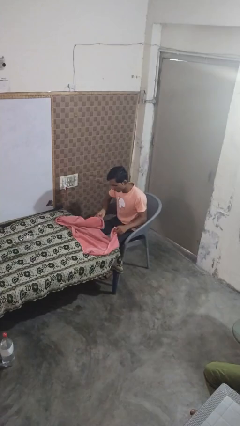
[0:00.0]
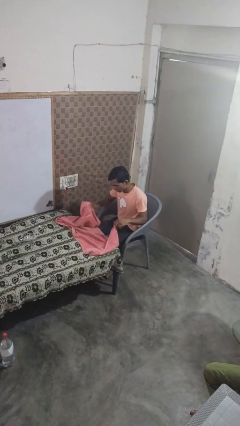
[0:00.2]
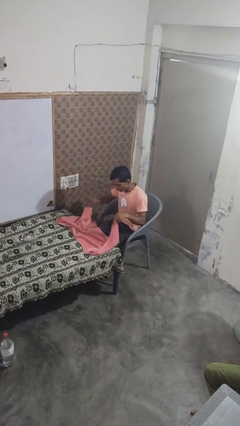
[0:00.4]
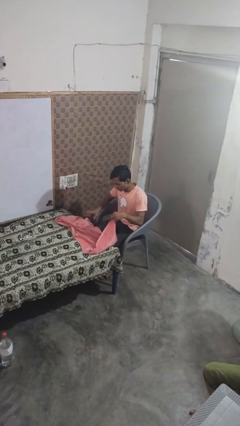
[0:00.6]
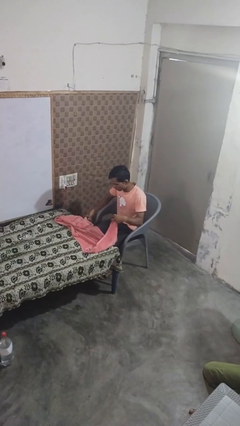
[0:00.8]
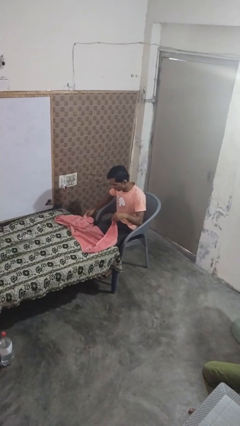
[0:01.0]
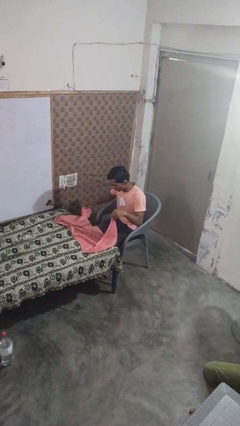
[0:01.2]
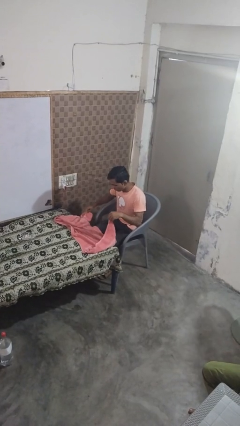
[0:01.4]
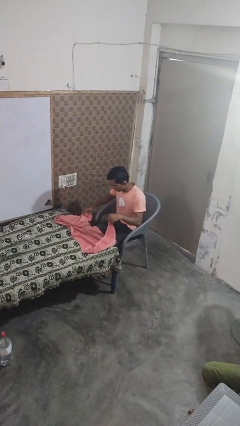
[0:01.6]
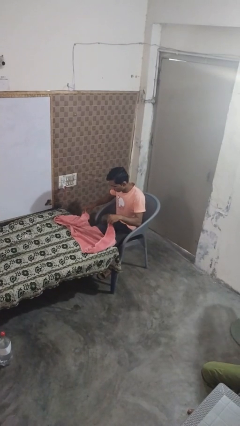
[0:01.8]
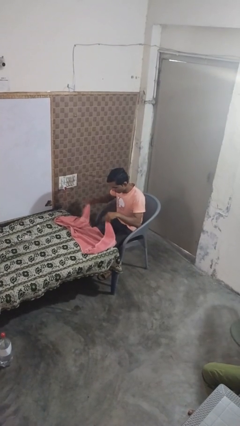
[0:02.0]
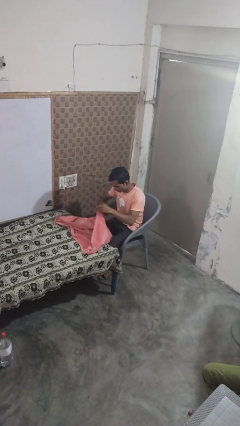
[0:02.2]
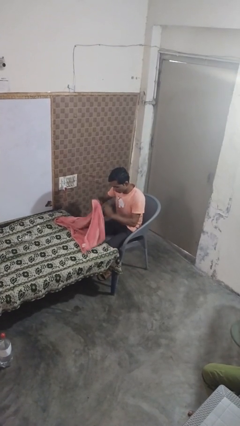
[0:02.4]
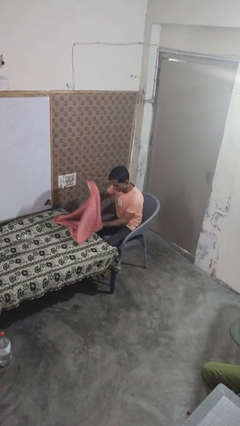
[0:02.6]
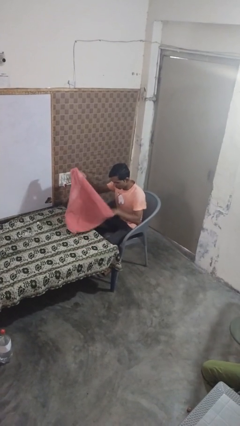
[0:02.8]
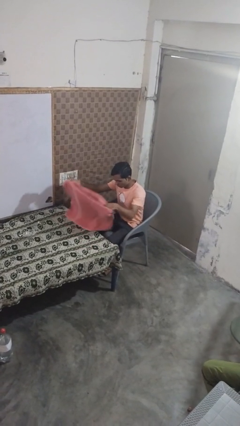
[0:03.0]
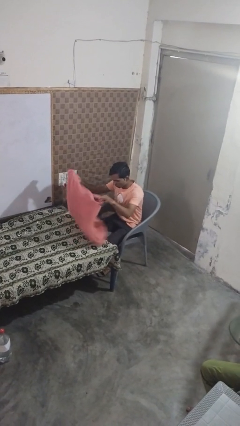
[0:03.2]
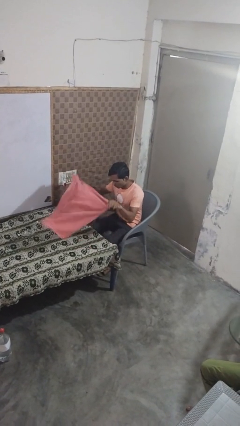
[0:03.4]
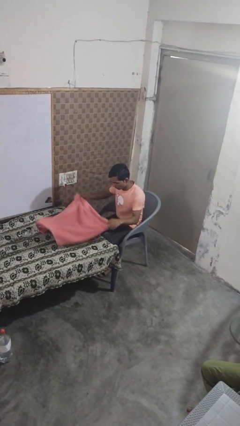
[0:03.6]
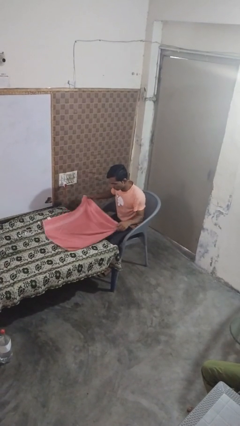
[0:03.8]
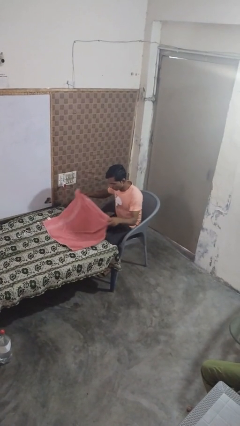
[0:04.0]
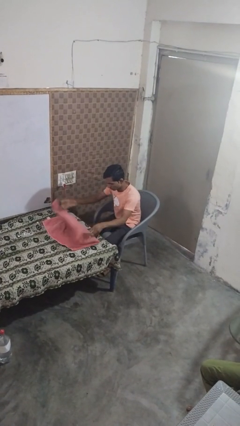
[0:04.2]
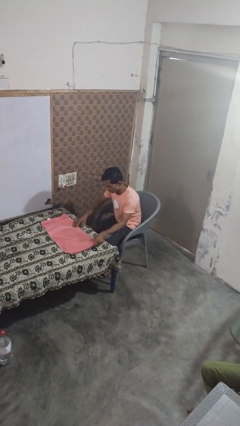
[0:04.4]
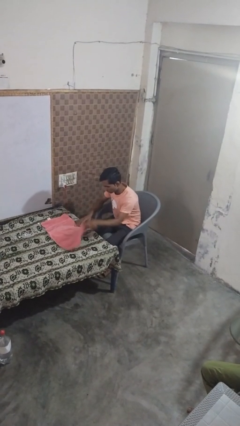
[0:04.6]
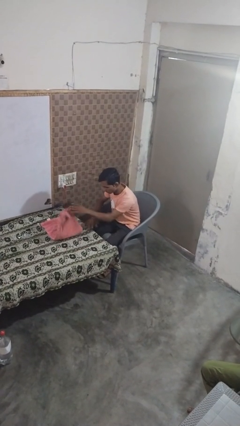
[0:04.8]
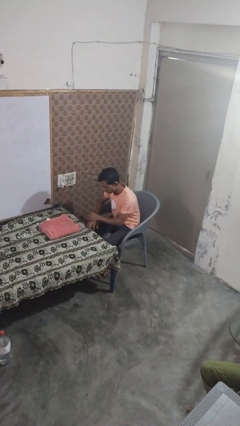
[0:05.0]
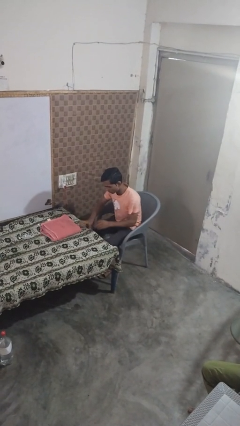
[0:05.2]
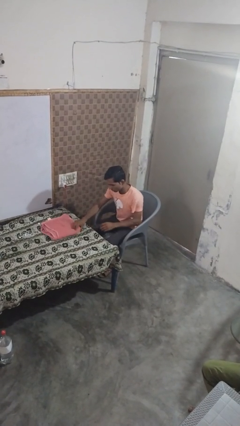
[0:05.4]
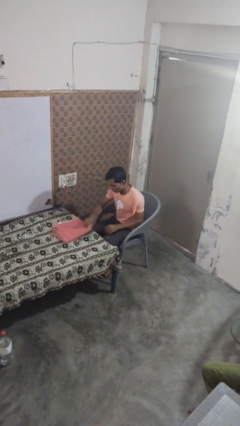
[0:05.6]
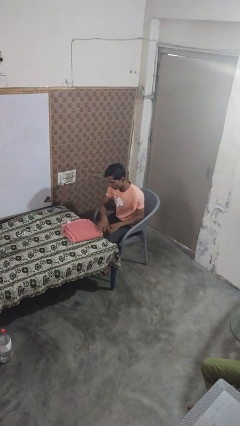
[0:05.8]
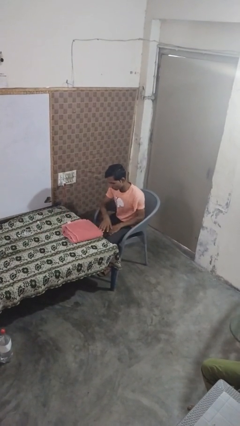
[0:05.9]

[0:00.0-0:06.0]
person folds towel

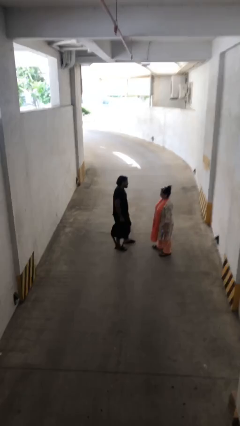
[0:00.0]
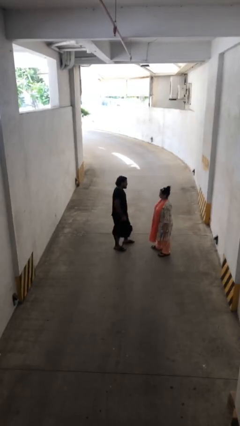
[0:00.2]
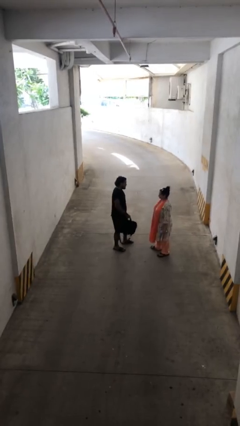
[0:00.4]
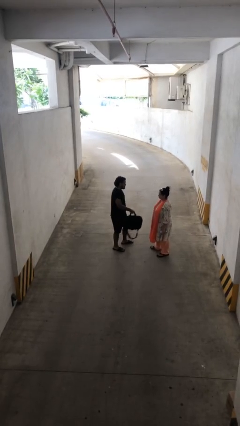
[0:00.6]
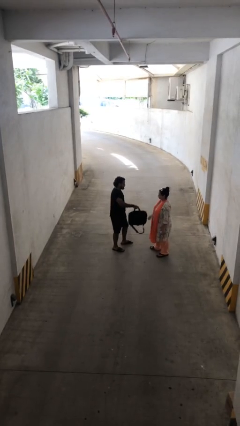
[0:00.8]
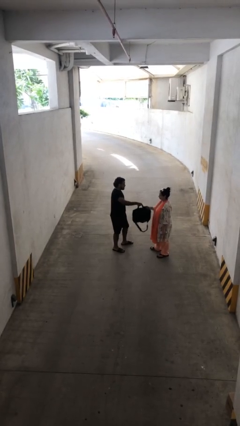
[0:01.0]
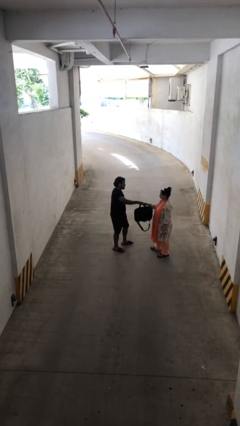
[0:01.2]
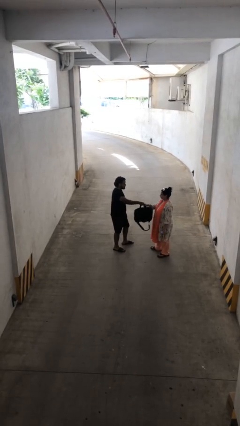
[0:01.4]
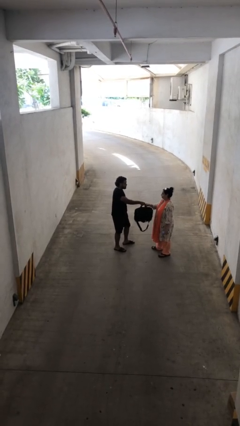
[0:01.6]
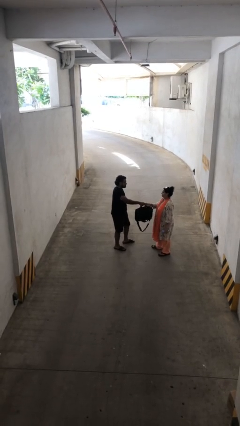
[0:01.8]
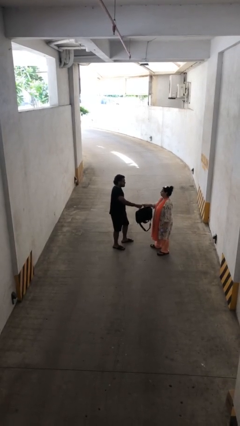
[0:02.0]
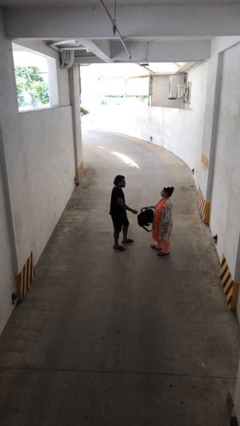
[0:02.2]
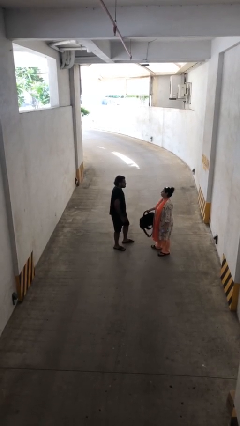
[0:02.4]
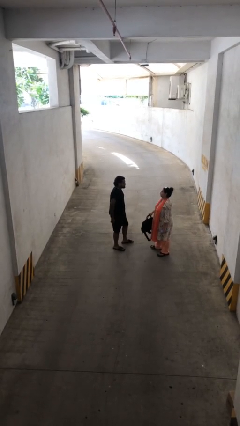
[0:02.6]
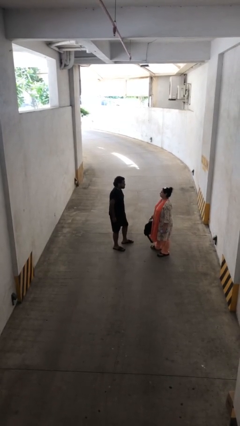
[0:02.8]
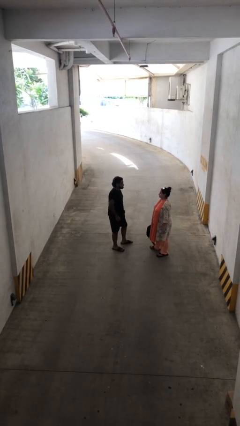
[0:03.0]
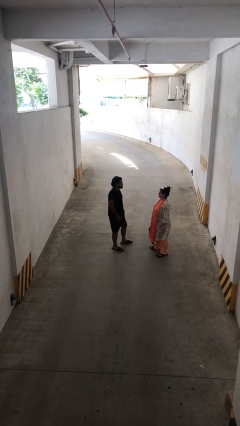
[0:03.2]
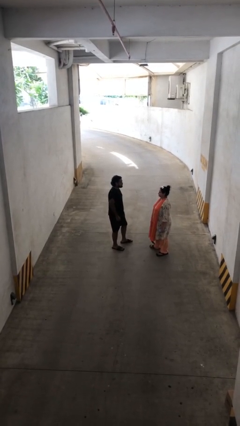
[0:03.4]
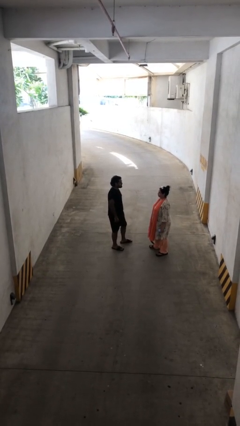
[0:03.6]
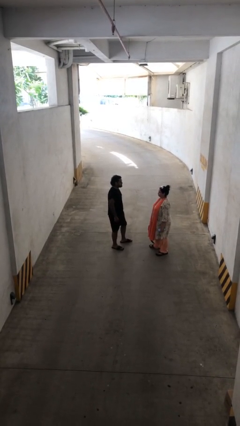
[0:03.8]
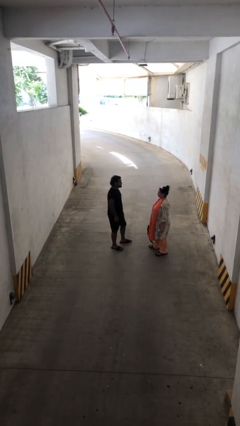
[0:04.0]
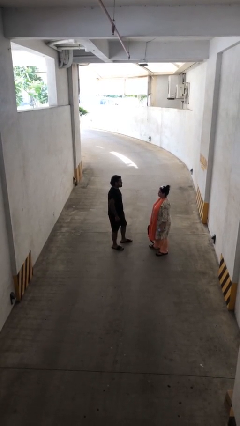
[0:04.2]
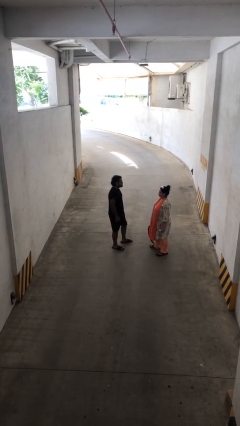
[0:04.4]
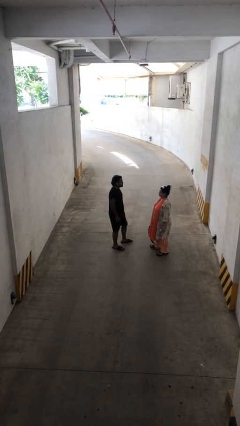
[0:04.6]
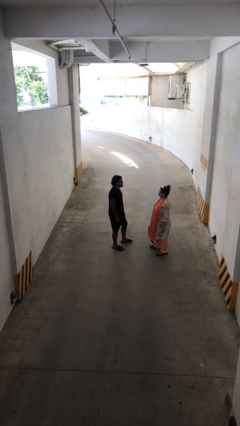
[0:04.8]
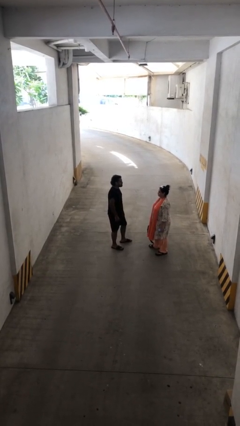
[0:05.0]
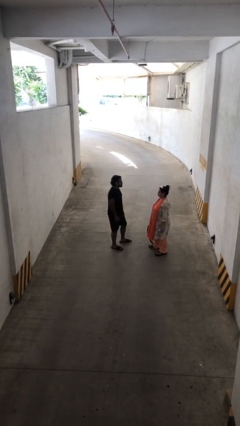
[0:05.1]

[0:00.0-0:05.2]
person transfers object to person

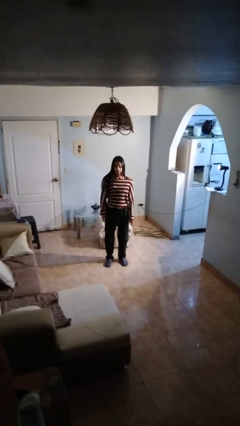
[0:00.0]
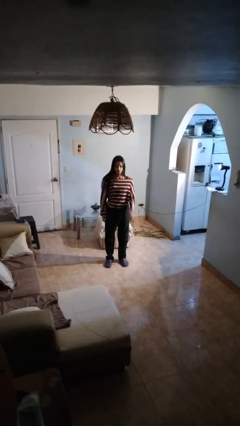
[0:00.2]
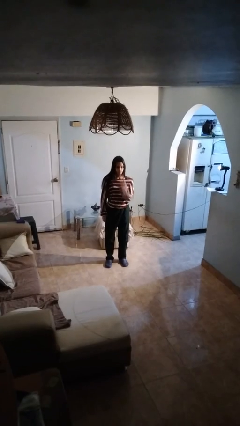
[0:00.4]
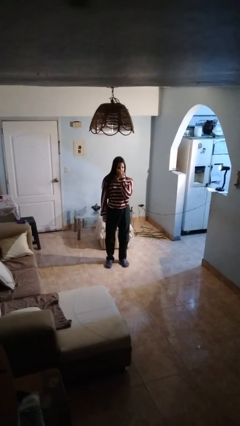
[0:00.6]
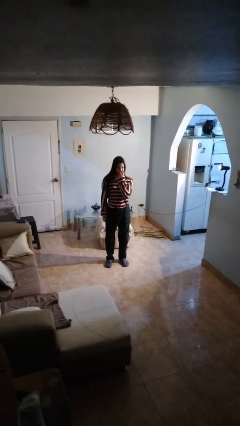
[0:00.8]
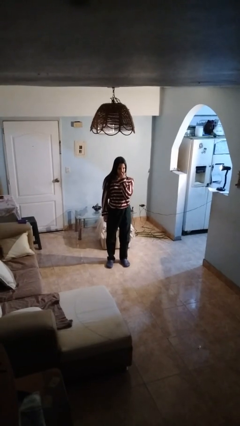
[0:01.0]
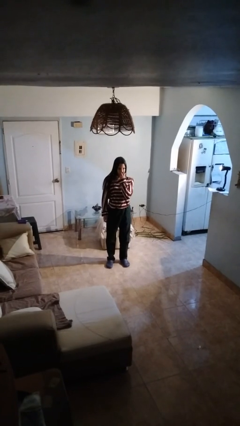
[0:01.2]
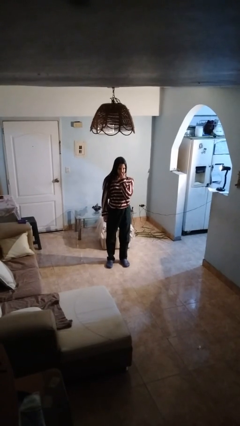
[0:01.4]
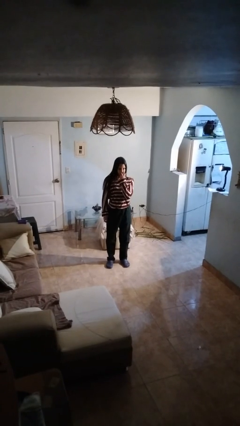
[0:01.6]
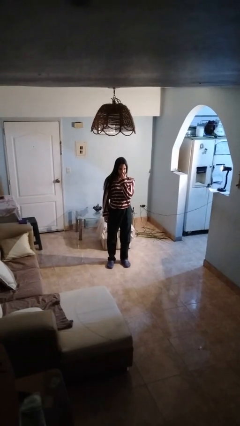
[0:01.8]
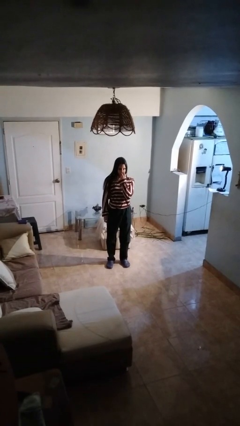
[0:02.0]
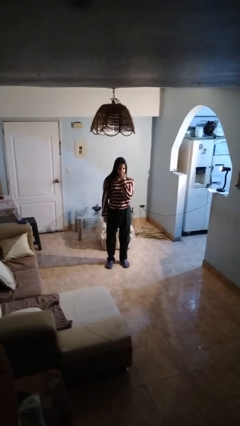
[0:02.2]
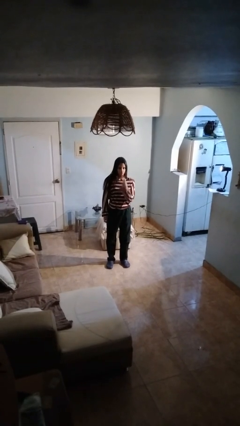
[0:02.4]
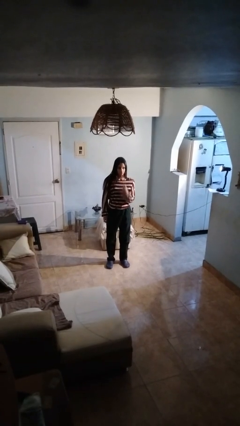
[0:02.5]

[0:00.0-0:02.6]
person gestures watch closely

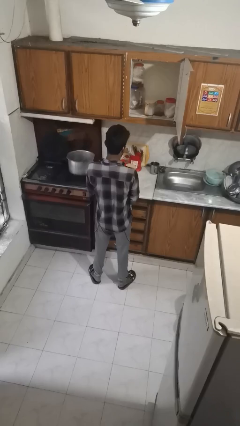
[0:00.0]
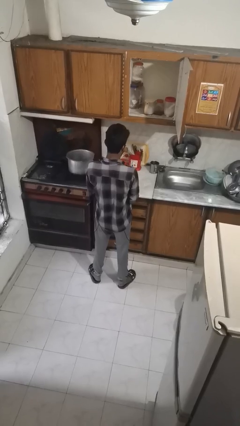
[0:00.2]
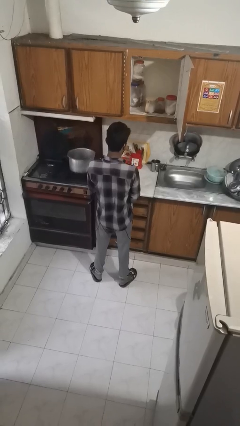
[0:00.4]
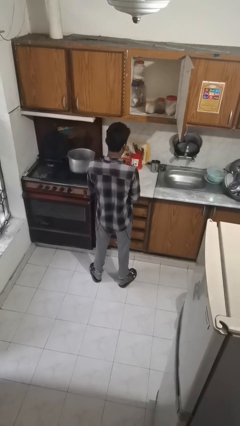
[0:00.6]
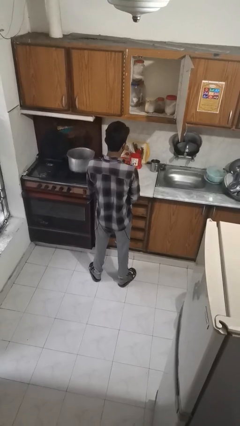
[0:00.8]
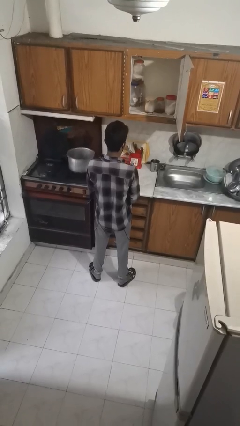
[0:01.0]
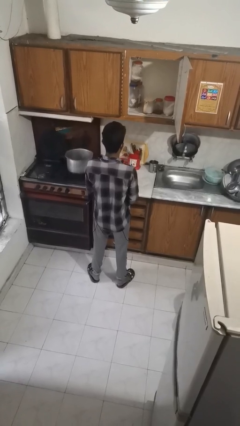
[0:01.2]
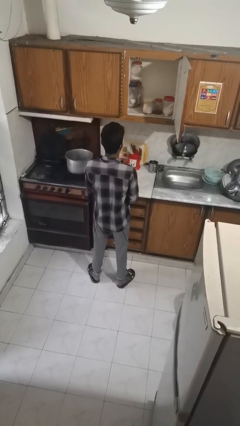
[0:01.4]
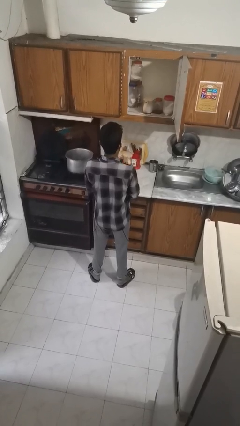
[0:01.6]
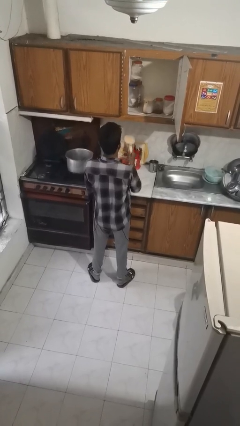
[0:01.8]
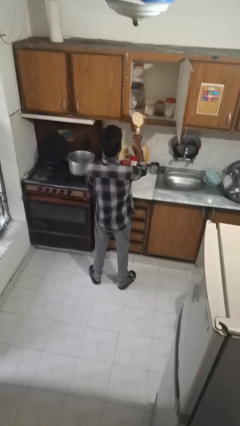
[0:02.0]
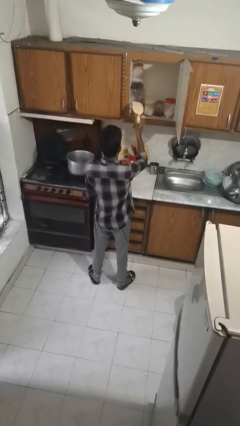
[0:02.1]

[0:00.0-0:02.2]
person puts down object into cabinet

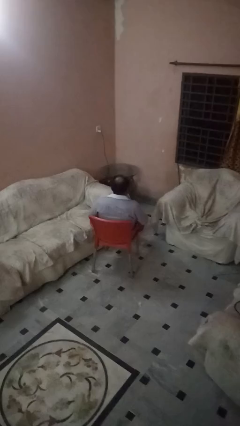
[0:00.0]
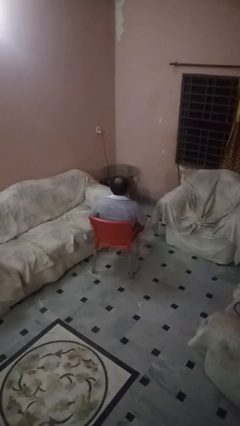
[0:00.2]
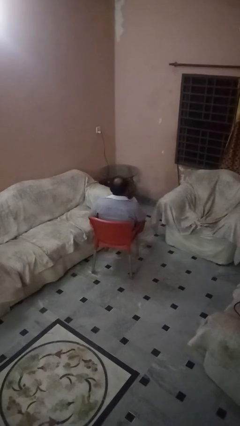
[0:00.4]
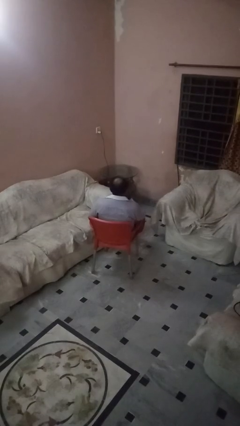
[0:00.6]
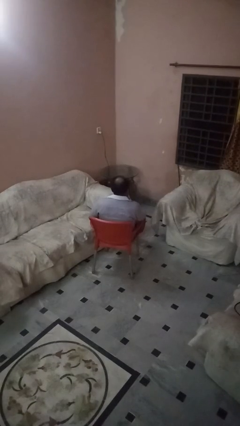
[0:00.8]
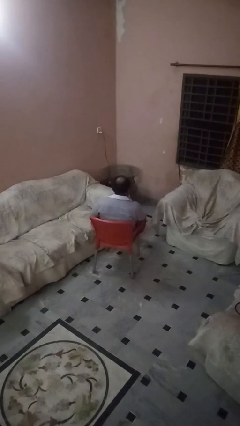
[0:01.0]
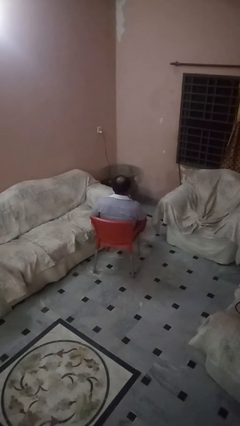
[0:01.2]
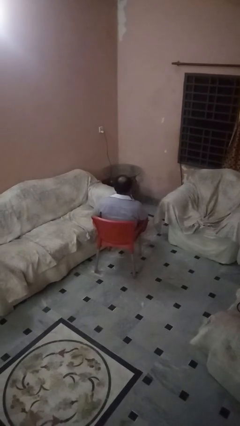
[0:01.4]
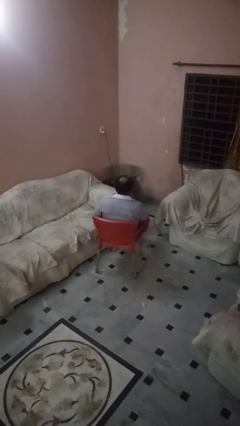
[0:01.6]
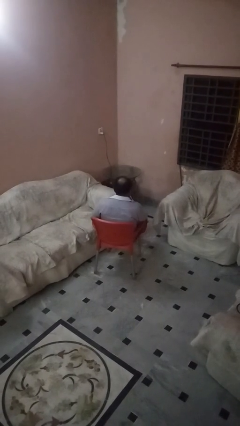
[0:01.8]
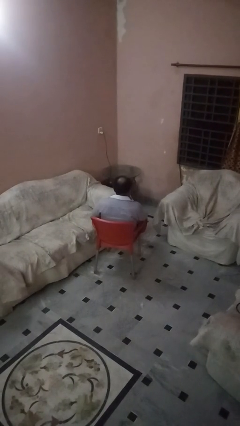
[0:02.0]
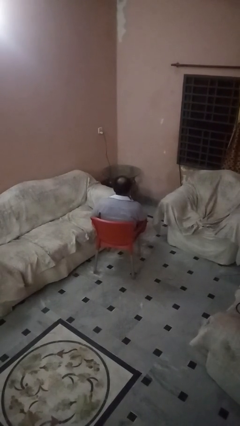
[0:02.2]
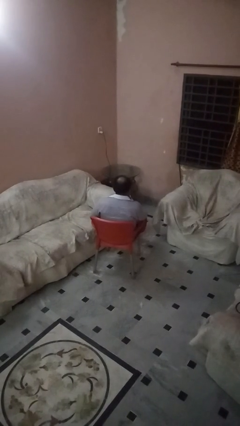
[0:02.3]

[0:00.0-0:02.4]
person strokes chin
